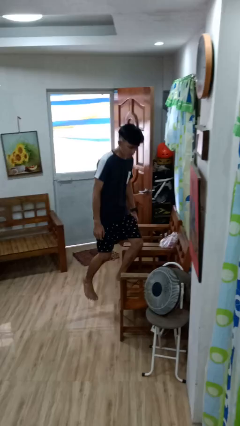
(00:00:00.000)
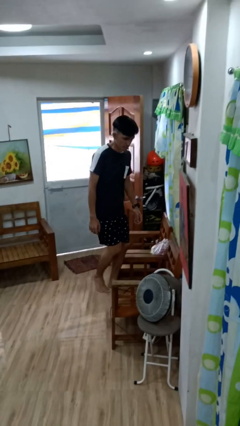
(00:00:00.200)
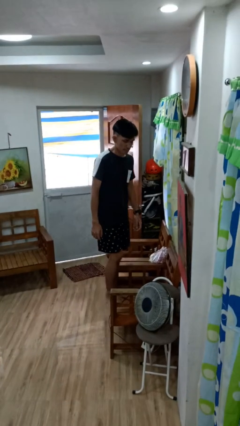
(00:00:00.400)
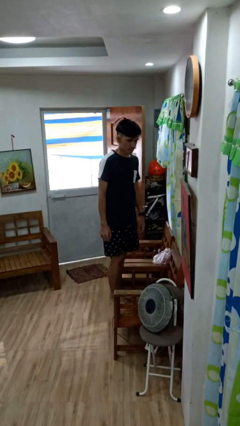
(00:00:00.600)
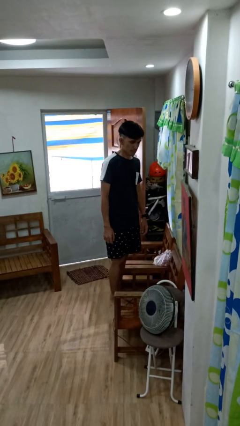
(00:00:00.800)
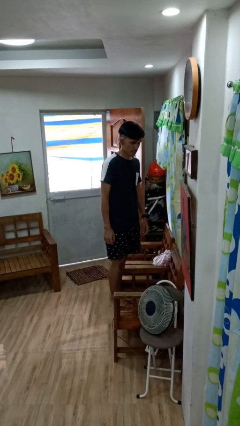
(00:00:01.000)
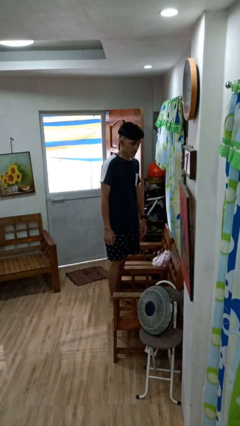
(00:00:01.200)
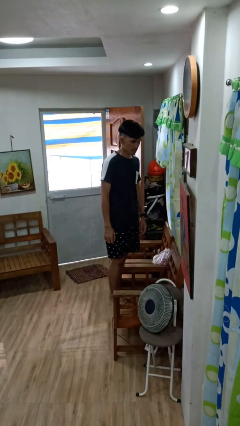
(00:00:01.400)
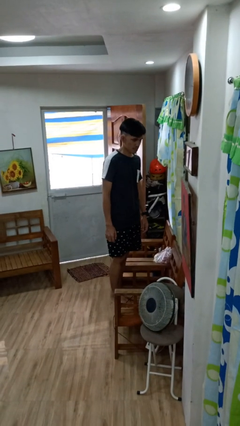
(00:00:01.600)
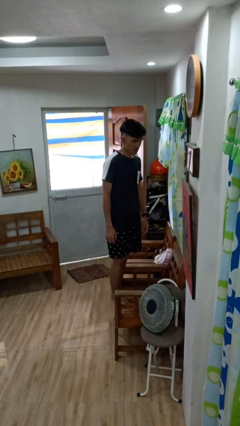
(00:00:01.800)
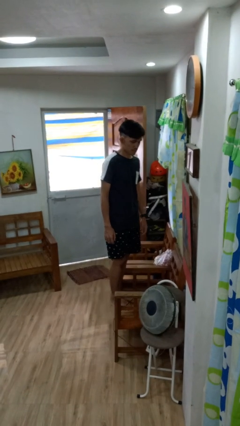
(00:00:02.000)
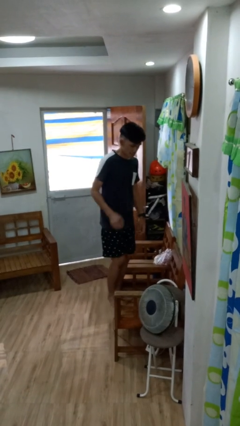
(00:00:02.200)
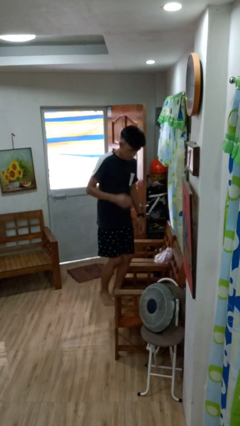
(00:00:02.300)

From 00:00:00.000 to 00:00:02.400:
person climbs on chair

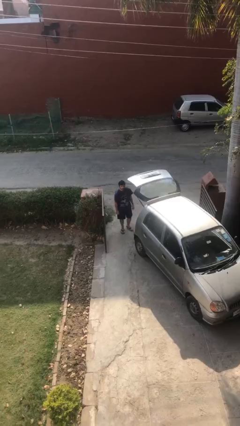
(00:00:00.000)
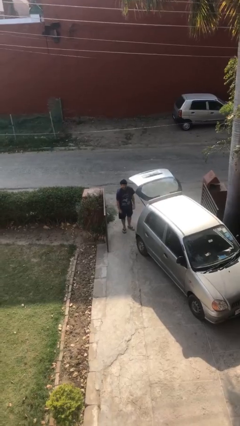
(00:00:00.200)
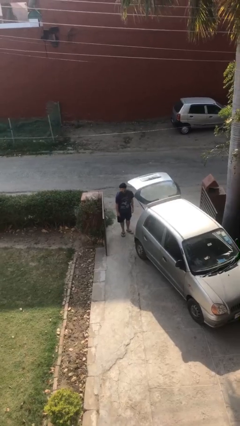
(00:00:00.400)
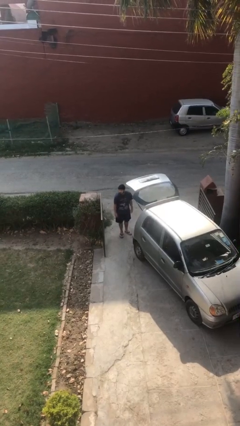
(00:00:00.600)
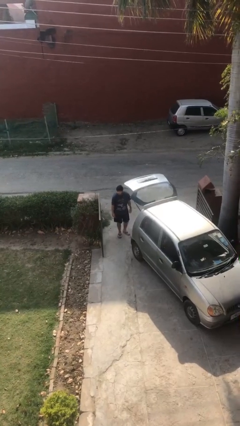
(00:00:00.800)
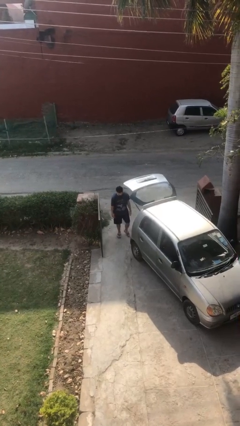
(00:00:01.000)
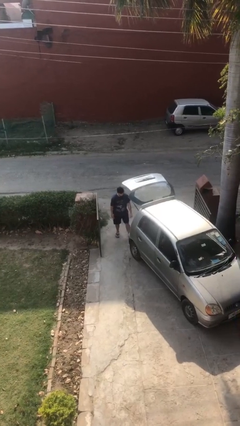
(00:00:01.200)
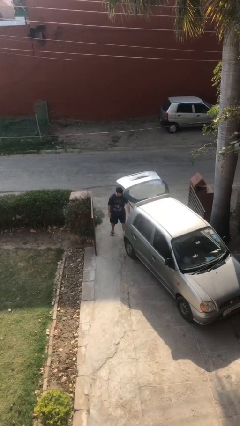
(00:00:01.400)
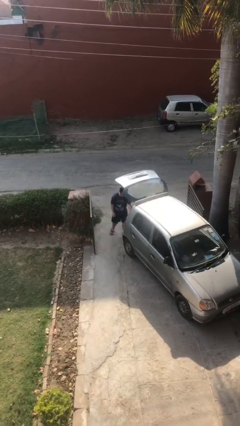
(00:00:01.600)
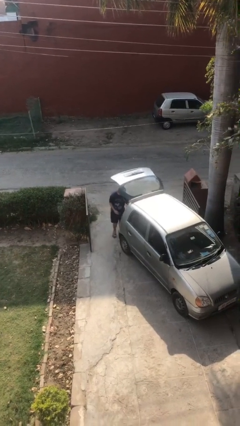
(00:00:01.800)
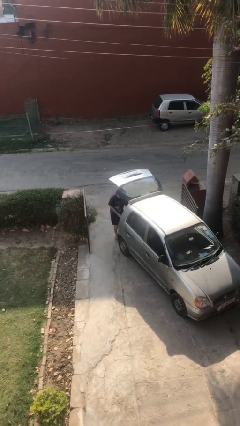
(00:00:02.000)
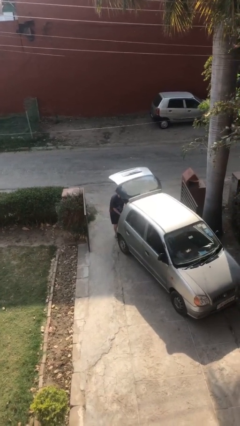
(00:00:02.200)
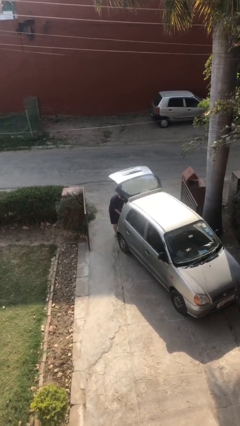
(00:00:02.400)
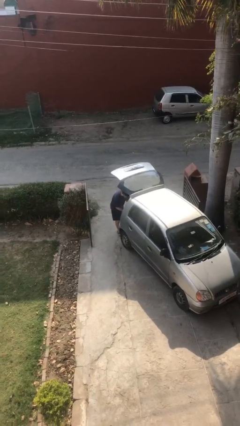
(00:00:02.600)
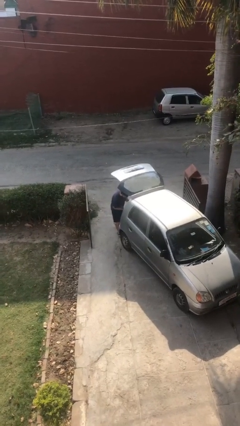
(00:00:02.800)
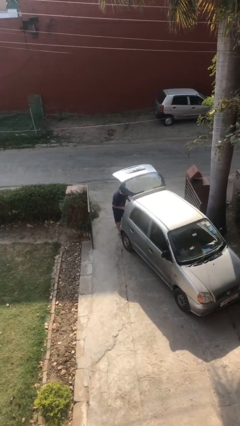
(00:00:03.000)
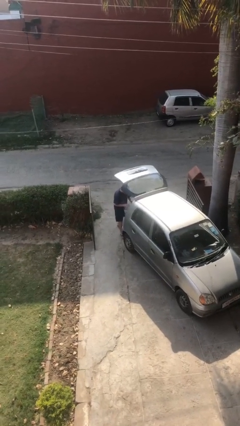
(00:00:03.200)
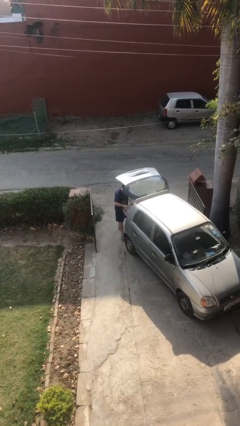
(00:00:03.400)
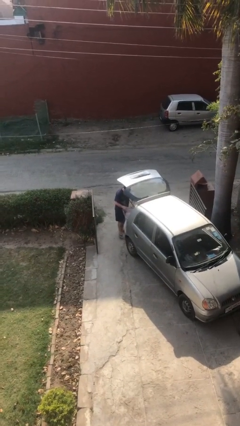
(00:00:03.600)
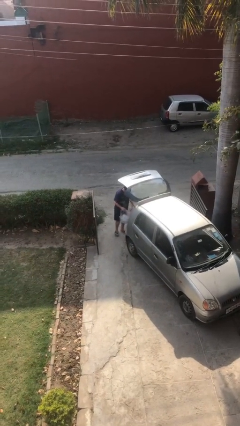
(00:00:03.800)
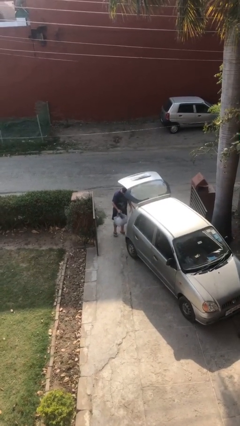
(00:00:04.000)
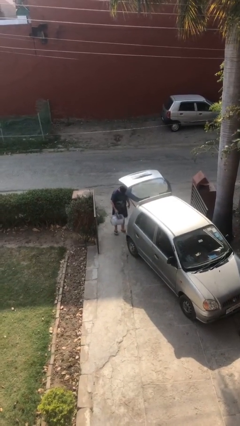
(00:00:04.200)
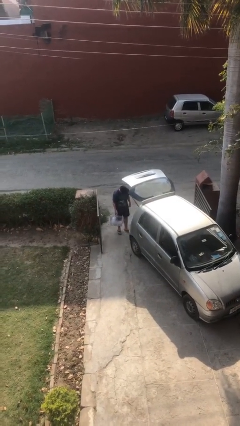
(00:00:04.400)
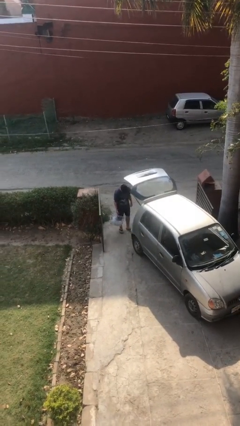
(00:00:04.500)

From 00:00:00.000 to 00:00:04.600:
person unloads car

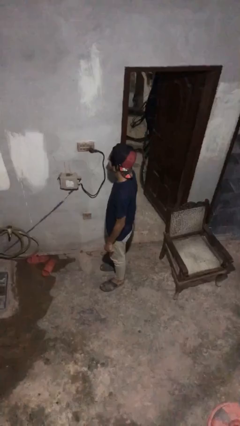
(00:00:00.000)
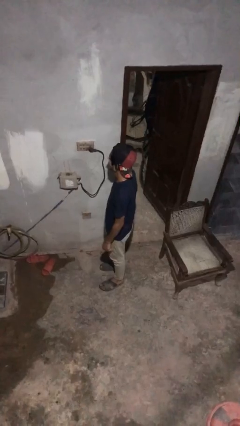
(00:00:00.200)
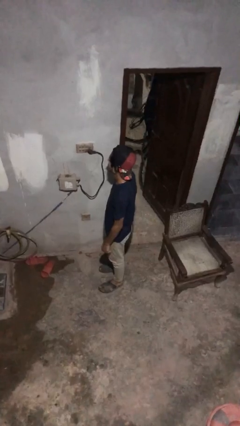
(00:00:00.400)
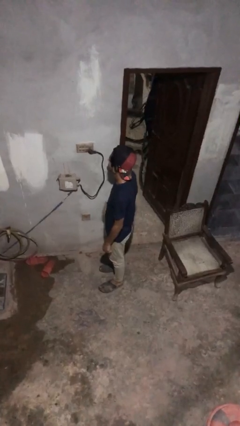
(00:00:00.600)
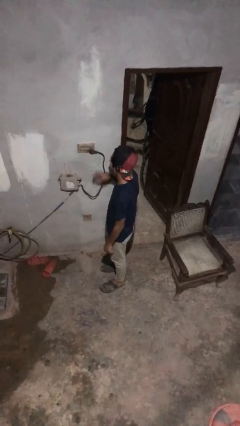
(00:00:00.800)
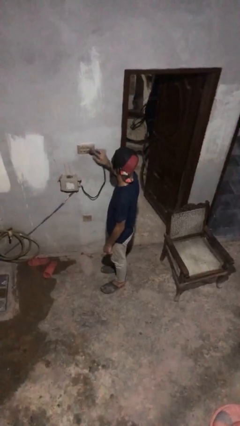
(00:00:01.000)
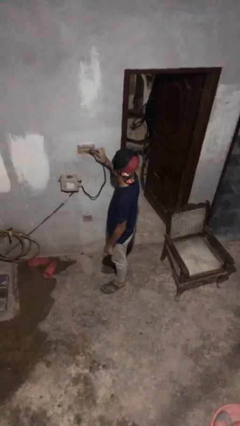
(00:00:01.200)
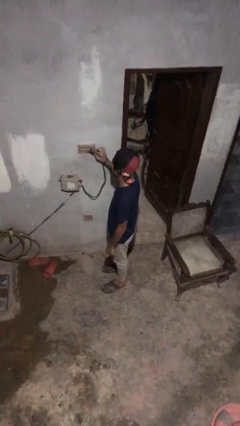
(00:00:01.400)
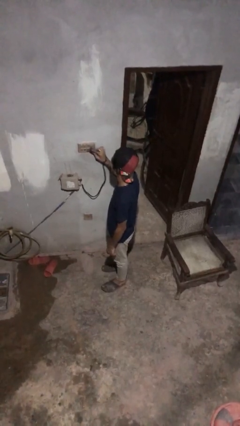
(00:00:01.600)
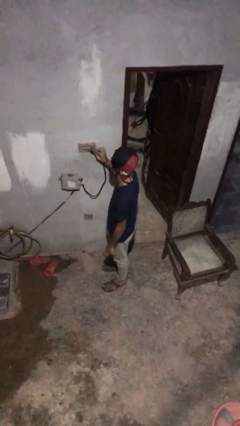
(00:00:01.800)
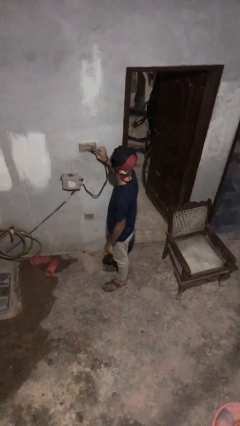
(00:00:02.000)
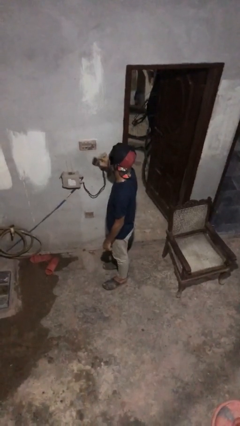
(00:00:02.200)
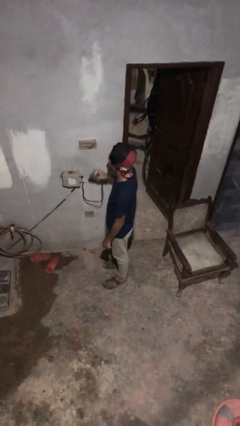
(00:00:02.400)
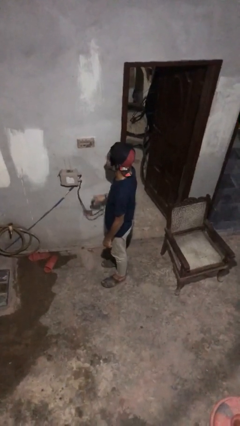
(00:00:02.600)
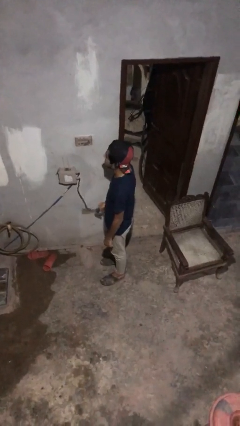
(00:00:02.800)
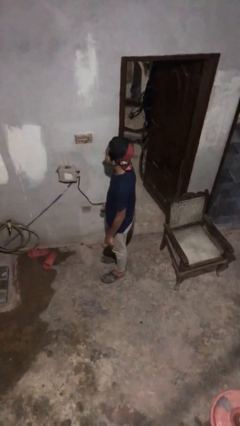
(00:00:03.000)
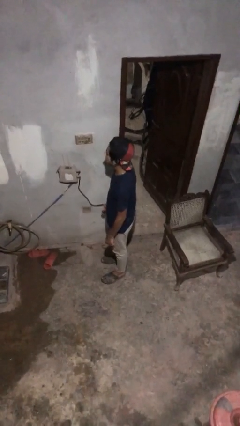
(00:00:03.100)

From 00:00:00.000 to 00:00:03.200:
person unplugs from electrical socket

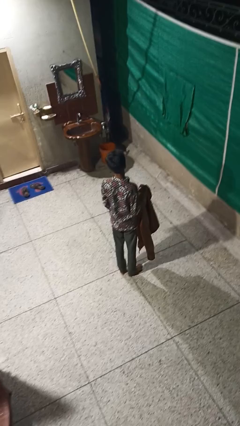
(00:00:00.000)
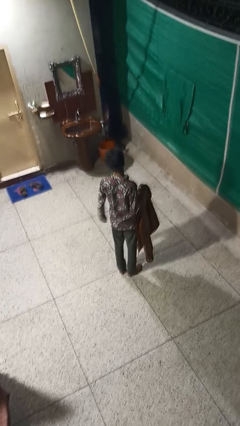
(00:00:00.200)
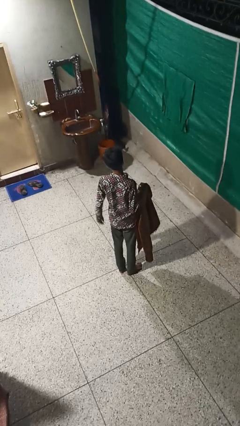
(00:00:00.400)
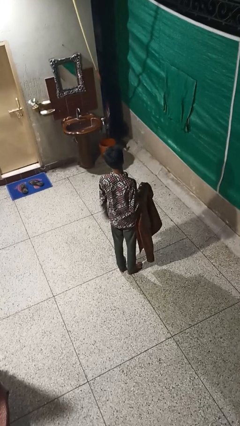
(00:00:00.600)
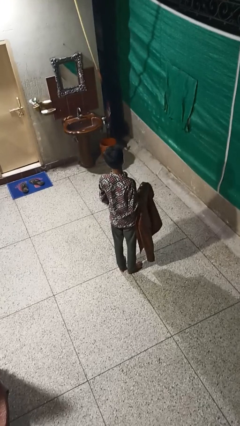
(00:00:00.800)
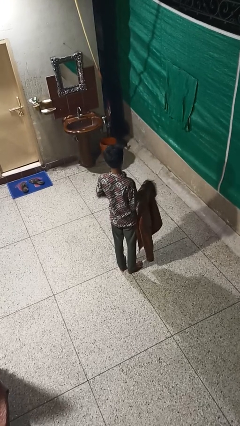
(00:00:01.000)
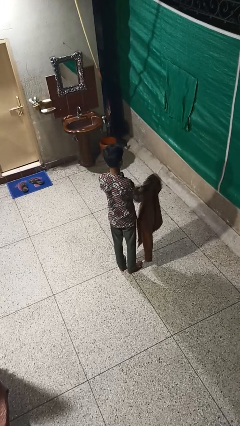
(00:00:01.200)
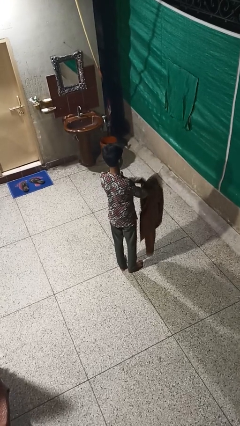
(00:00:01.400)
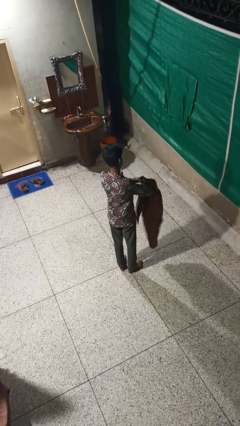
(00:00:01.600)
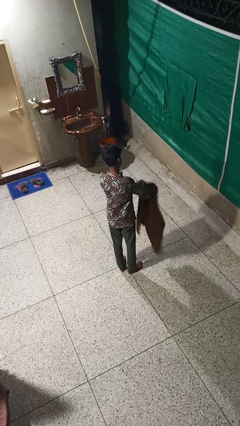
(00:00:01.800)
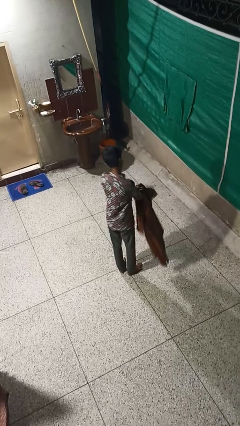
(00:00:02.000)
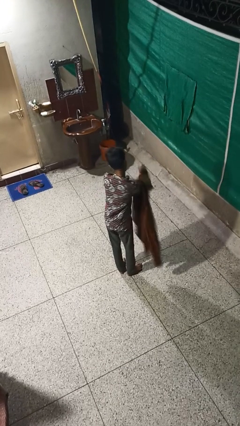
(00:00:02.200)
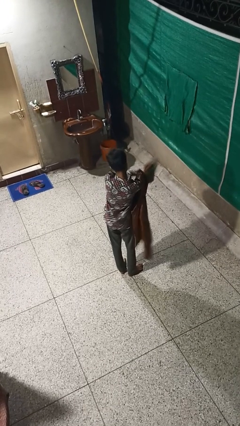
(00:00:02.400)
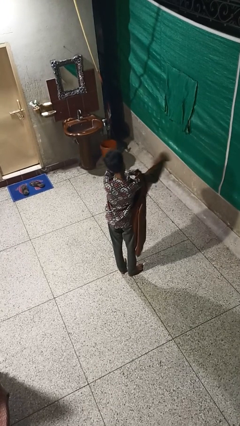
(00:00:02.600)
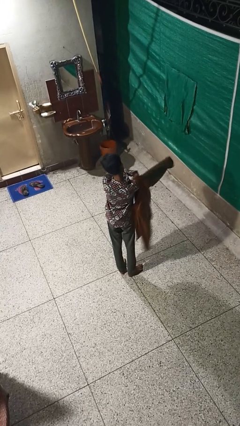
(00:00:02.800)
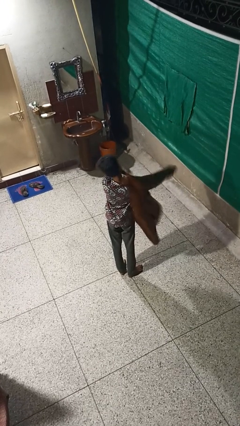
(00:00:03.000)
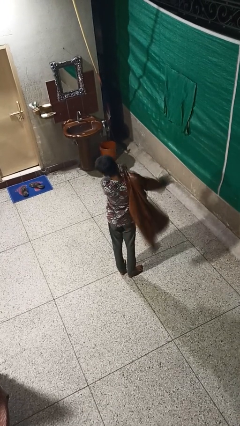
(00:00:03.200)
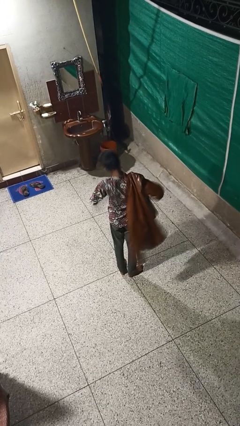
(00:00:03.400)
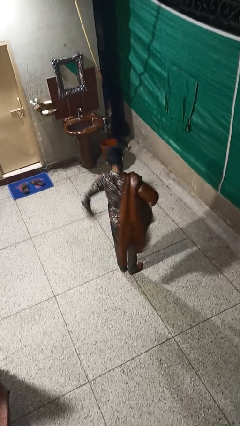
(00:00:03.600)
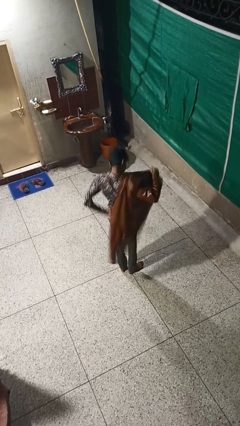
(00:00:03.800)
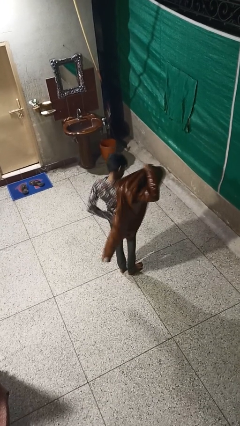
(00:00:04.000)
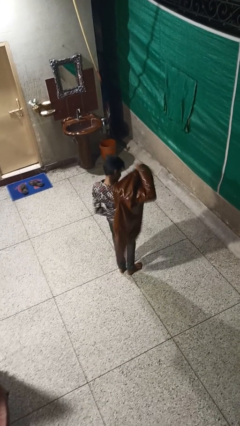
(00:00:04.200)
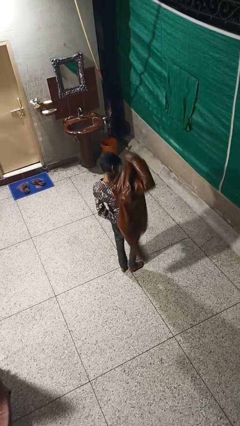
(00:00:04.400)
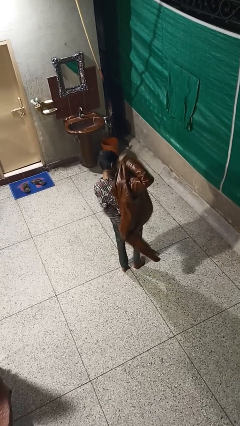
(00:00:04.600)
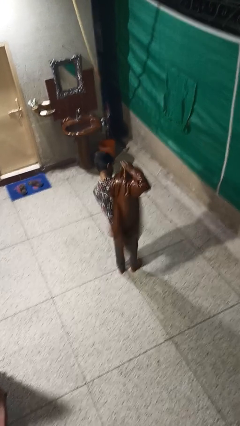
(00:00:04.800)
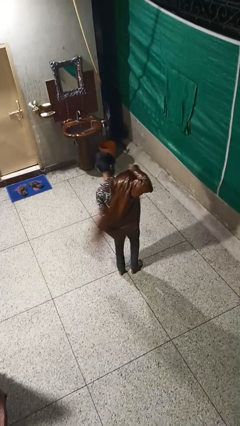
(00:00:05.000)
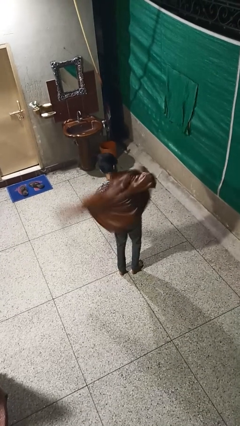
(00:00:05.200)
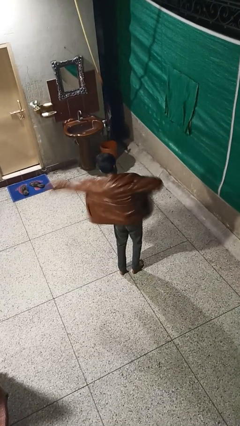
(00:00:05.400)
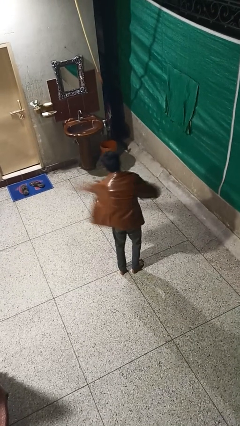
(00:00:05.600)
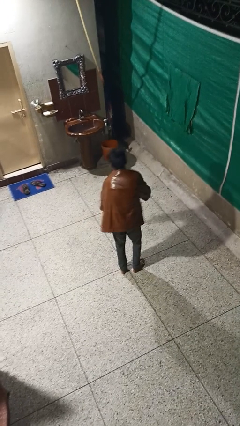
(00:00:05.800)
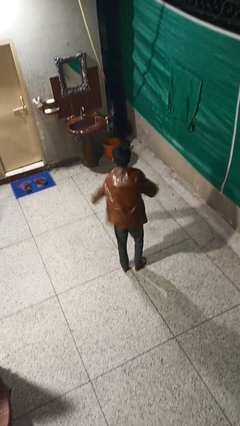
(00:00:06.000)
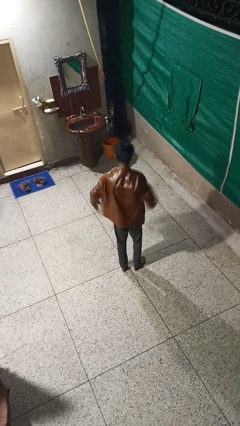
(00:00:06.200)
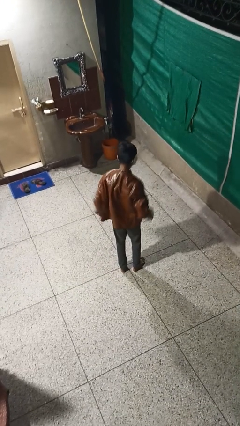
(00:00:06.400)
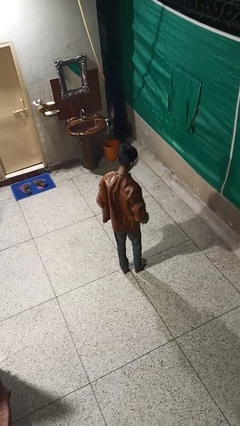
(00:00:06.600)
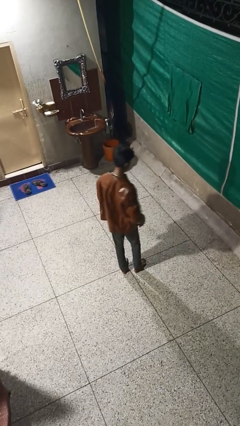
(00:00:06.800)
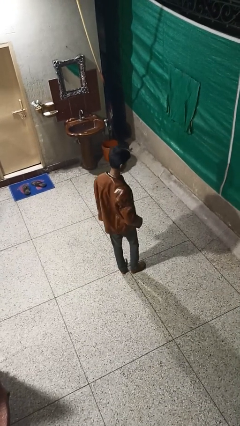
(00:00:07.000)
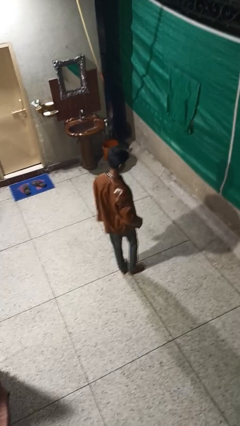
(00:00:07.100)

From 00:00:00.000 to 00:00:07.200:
person puts on jacket

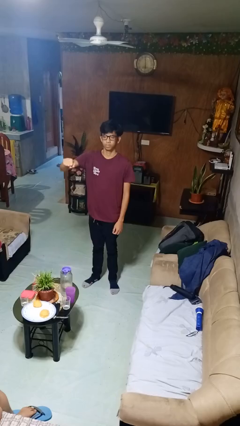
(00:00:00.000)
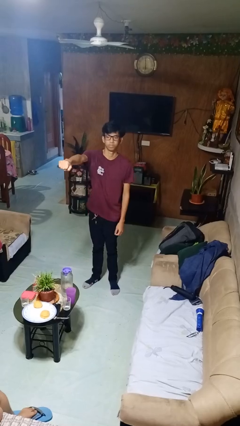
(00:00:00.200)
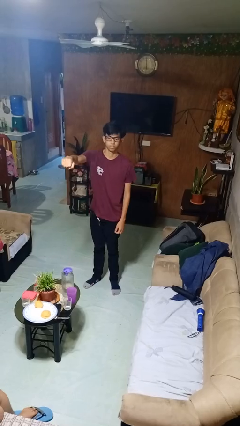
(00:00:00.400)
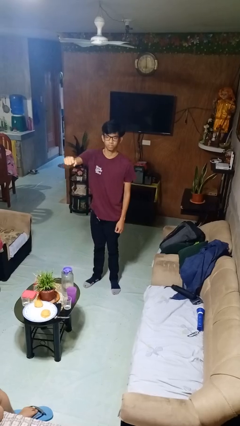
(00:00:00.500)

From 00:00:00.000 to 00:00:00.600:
person punches
